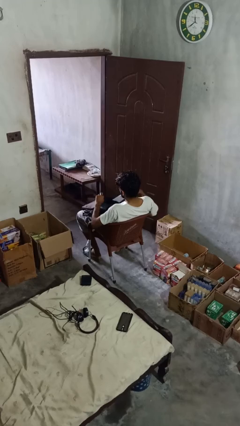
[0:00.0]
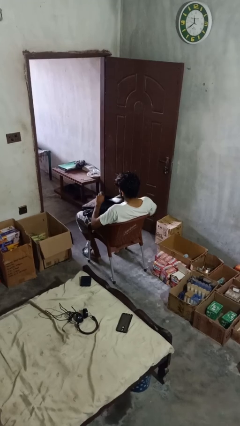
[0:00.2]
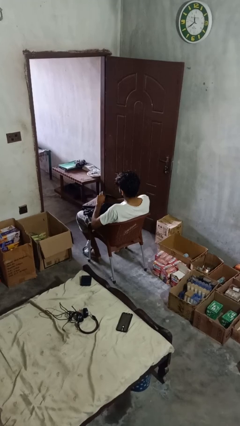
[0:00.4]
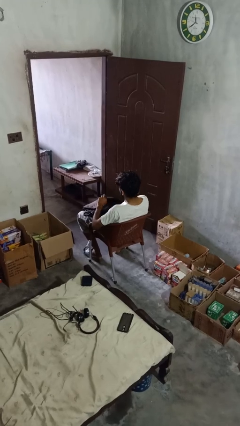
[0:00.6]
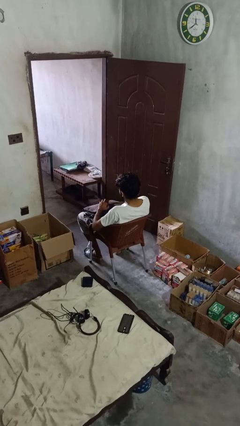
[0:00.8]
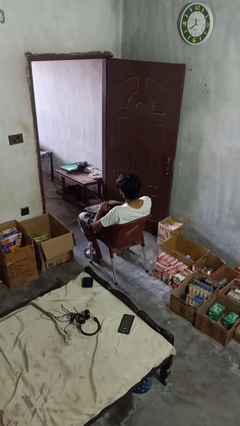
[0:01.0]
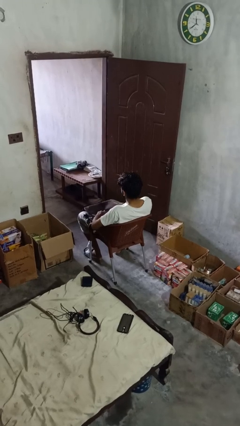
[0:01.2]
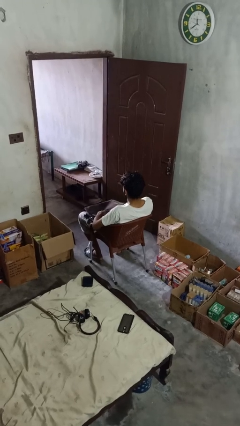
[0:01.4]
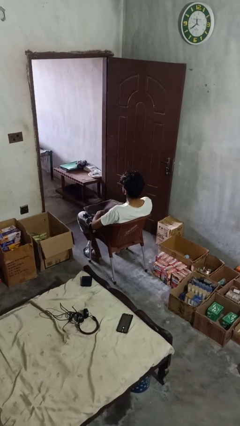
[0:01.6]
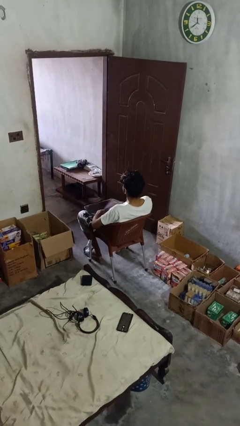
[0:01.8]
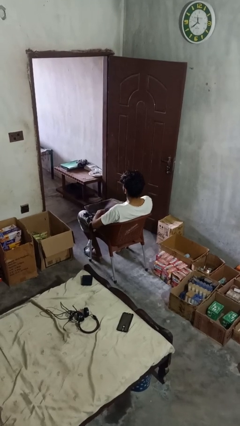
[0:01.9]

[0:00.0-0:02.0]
person puts object into backpack

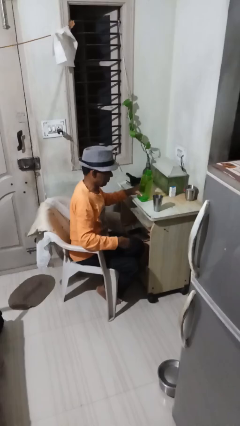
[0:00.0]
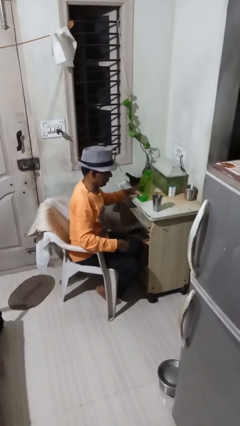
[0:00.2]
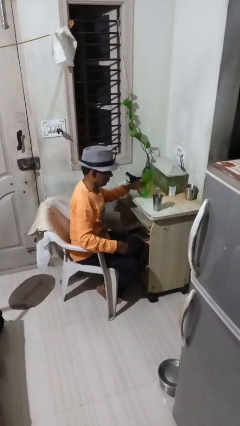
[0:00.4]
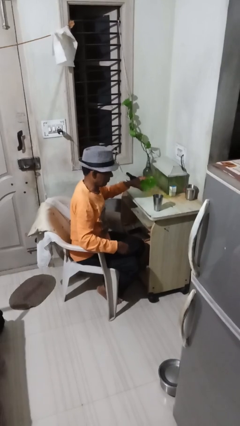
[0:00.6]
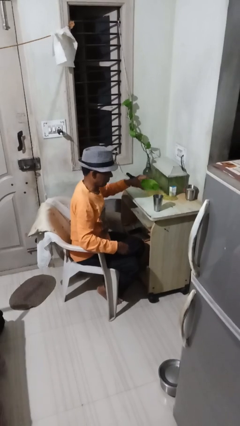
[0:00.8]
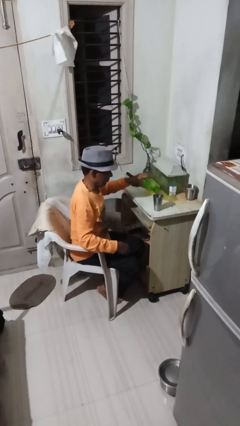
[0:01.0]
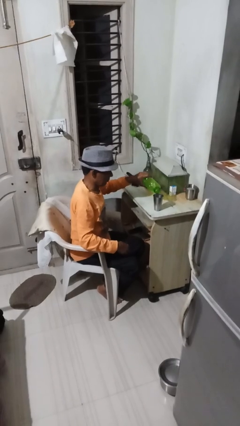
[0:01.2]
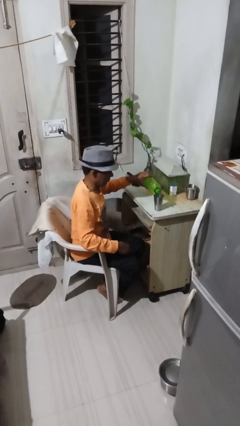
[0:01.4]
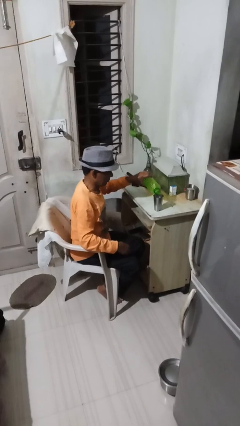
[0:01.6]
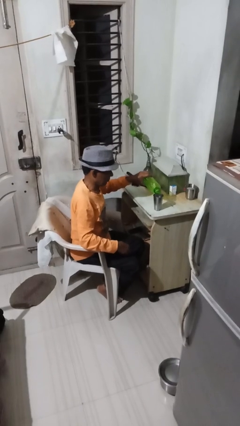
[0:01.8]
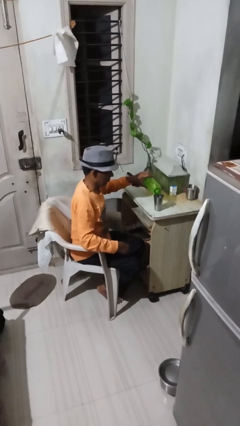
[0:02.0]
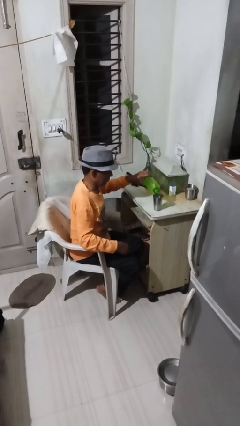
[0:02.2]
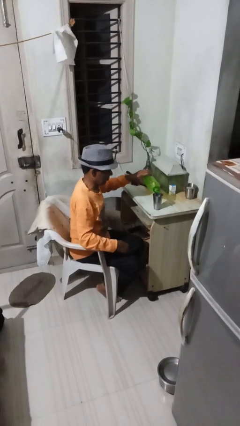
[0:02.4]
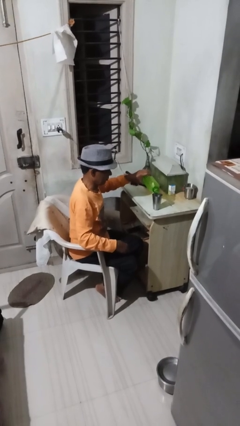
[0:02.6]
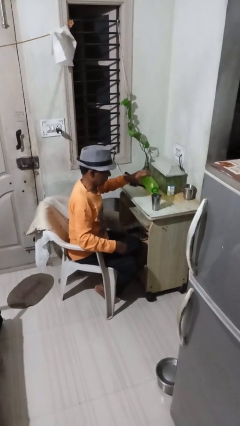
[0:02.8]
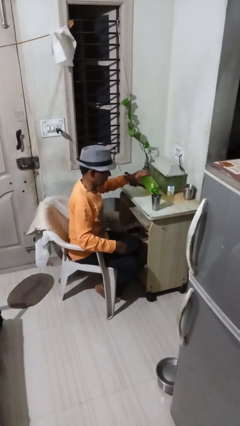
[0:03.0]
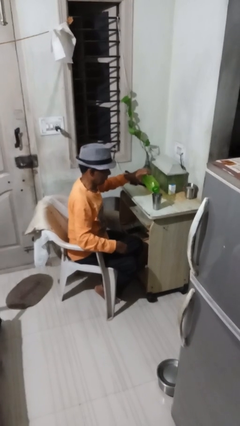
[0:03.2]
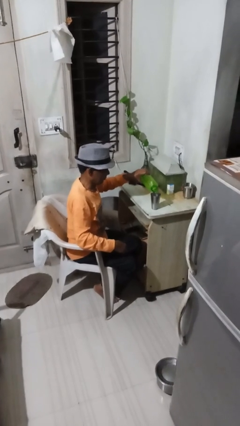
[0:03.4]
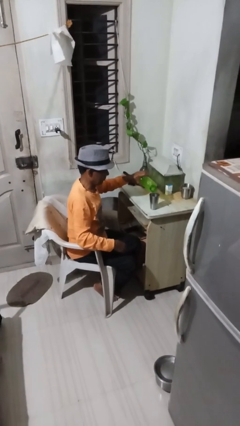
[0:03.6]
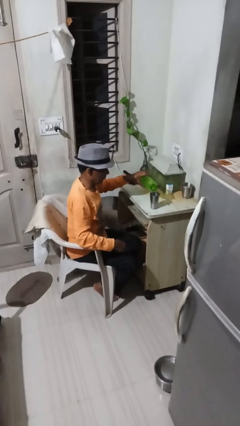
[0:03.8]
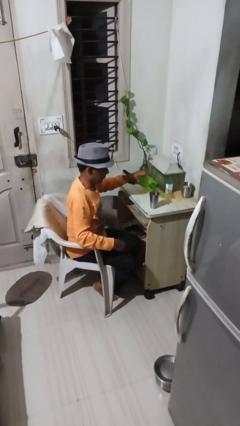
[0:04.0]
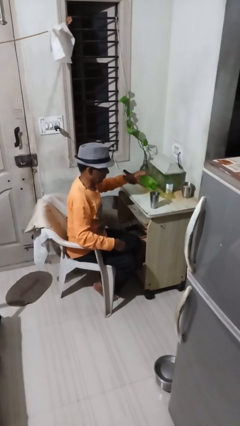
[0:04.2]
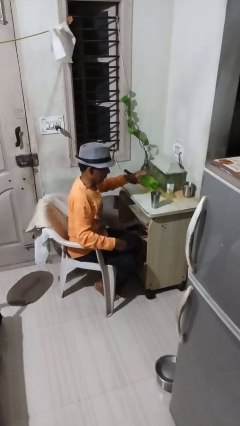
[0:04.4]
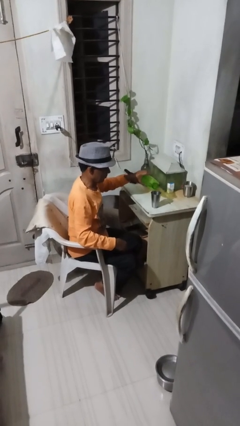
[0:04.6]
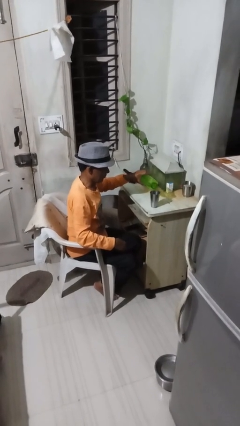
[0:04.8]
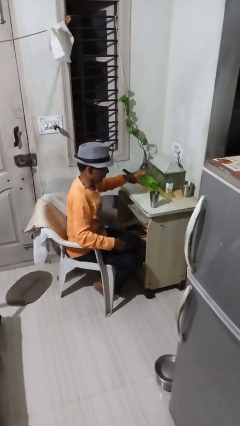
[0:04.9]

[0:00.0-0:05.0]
person pours liquid into cup

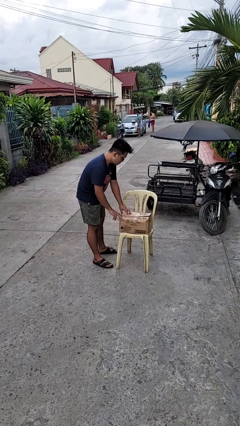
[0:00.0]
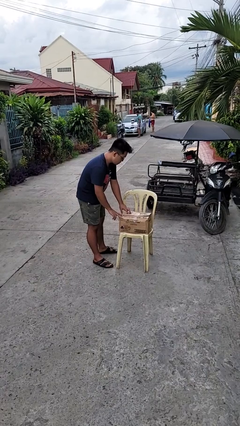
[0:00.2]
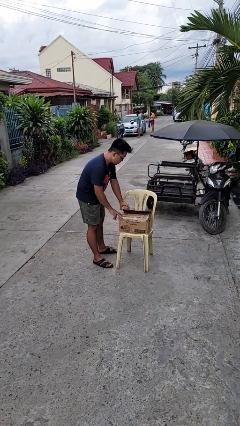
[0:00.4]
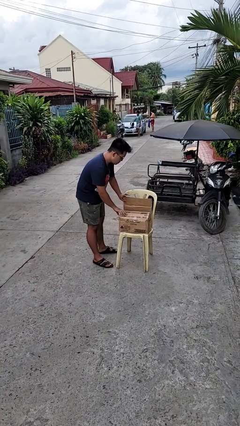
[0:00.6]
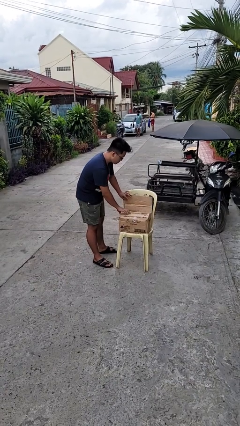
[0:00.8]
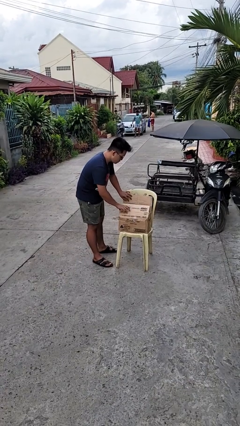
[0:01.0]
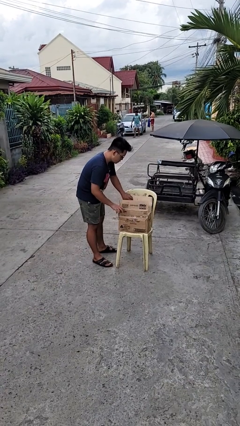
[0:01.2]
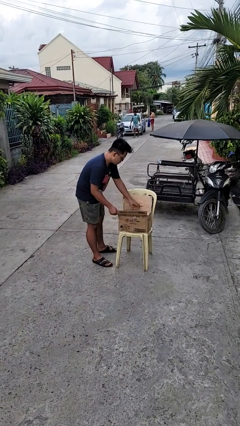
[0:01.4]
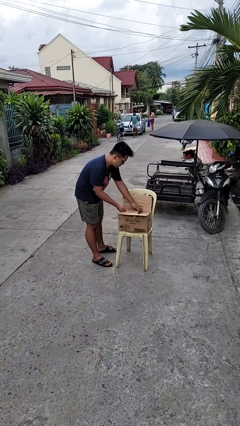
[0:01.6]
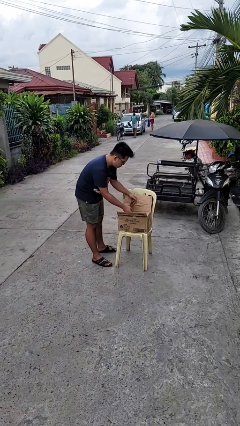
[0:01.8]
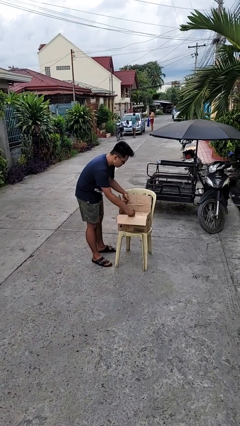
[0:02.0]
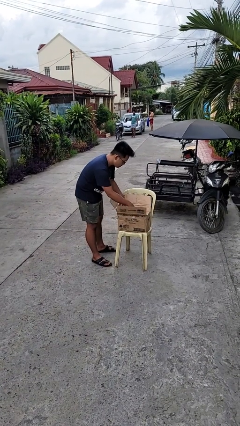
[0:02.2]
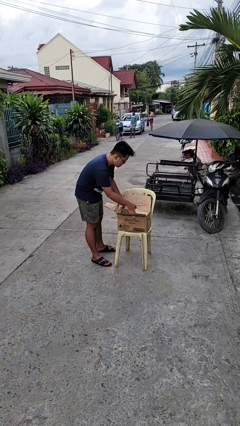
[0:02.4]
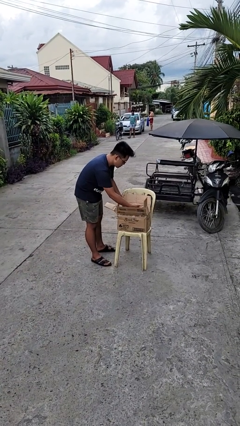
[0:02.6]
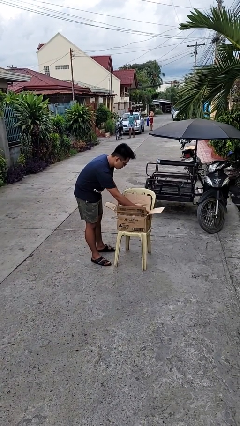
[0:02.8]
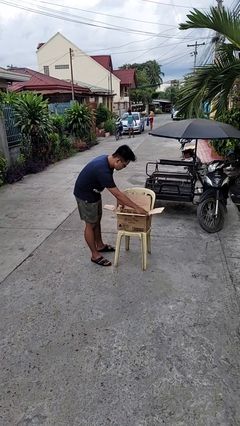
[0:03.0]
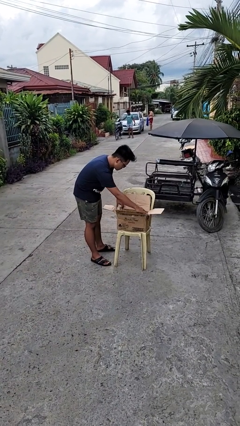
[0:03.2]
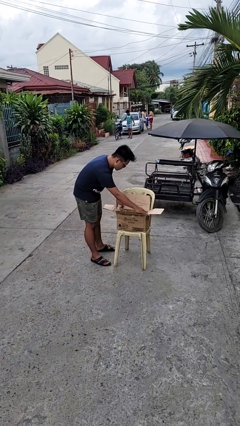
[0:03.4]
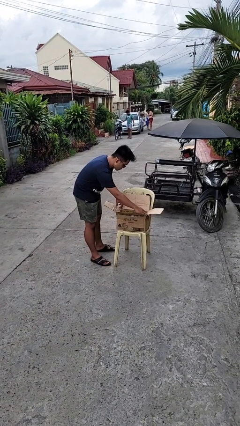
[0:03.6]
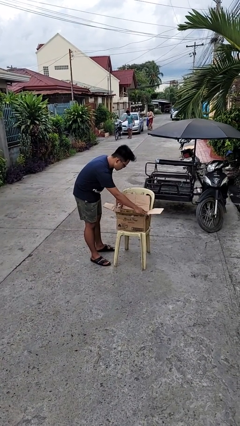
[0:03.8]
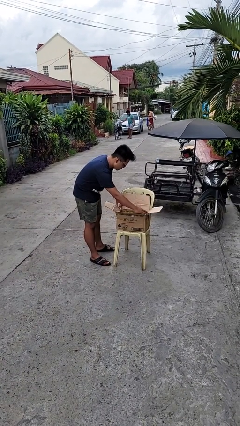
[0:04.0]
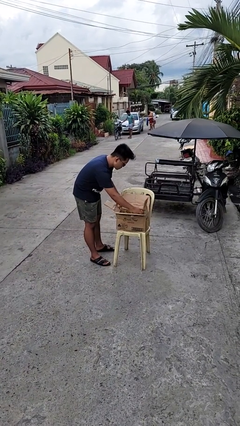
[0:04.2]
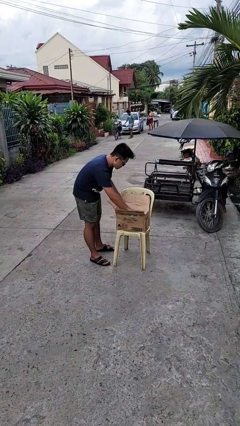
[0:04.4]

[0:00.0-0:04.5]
person opens box

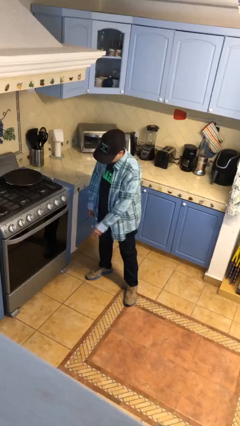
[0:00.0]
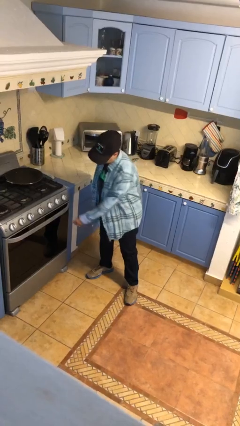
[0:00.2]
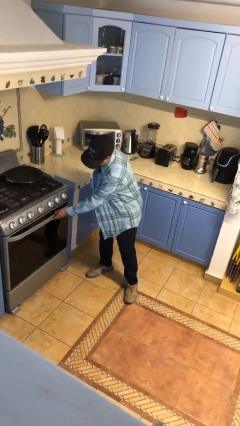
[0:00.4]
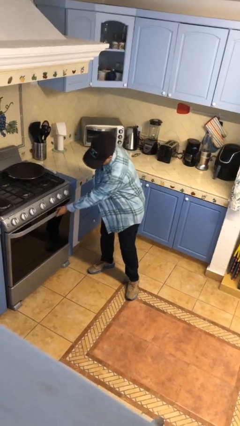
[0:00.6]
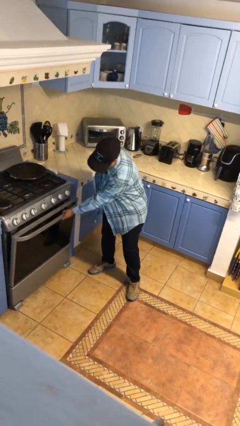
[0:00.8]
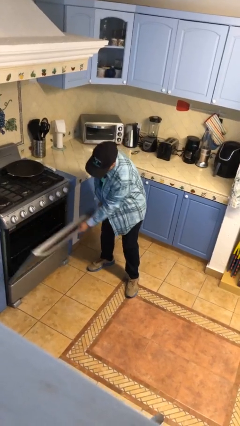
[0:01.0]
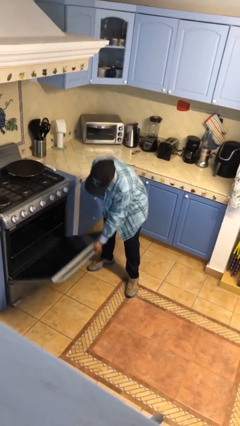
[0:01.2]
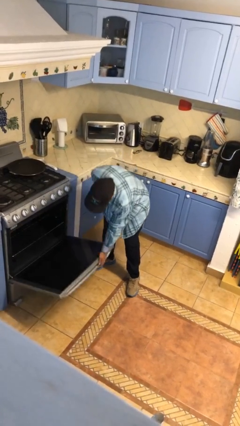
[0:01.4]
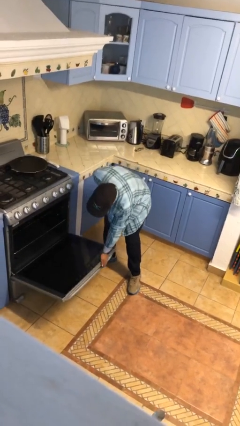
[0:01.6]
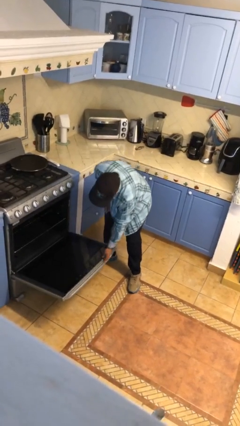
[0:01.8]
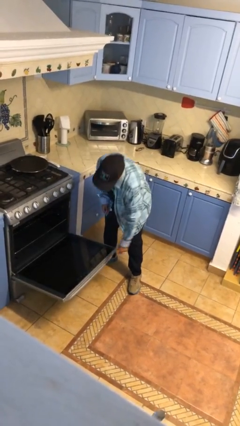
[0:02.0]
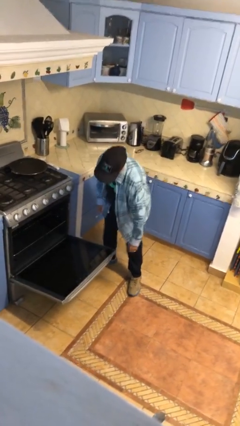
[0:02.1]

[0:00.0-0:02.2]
person opens oven door

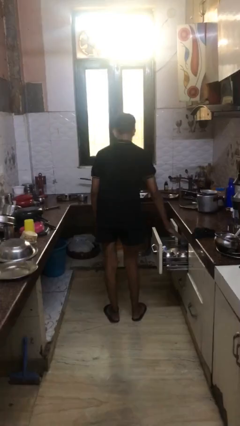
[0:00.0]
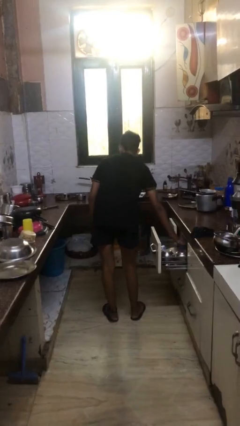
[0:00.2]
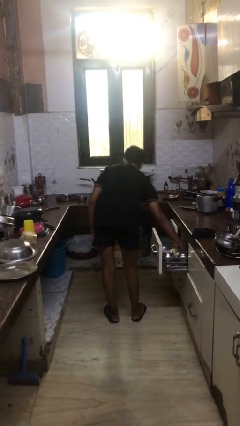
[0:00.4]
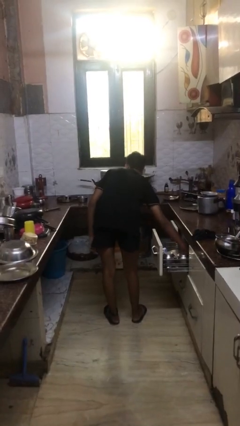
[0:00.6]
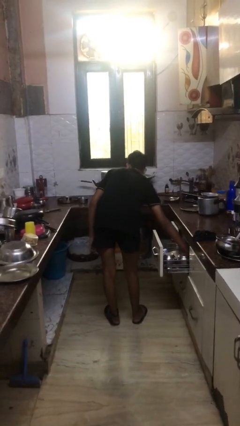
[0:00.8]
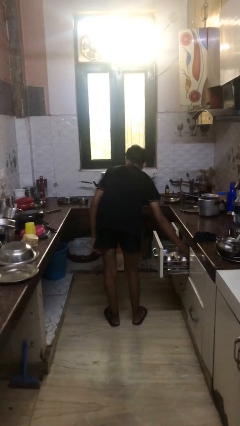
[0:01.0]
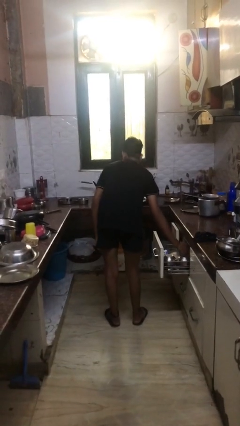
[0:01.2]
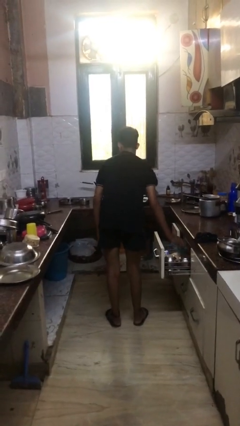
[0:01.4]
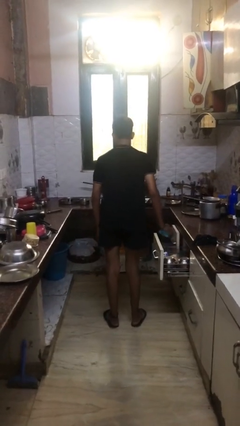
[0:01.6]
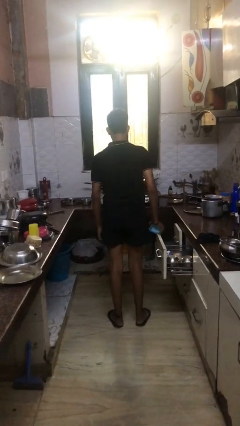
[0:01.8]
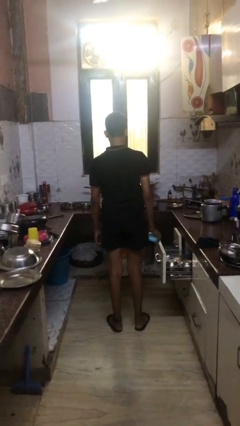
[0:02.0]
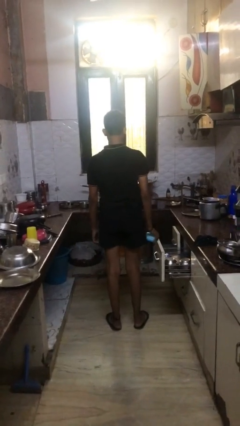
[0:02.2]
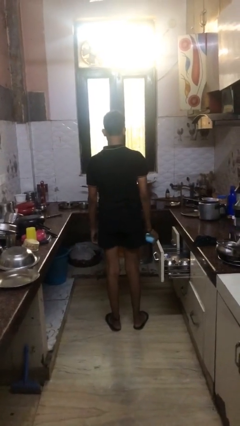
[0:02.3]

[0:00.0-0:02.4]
person takes object from kitchen drawer

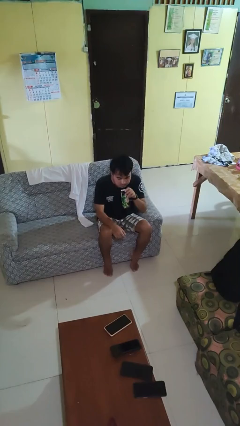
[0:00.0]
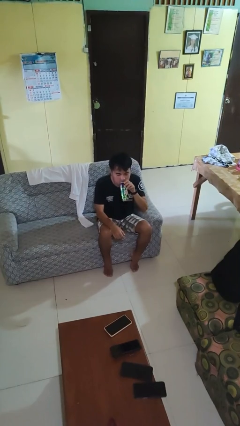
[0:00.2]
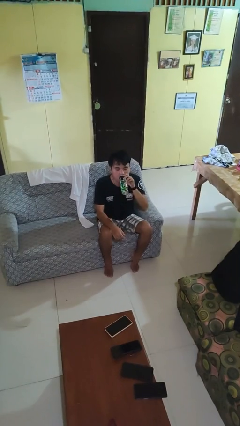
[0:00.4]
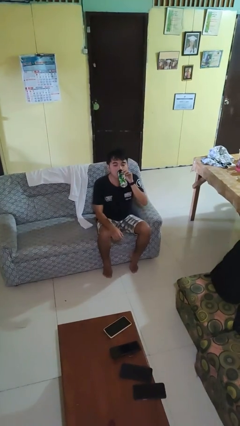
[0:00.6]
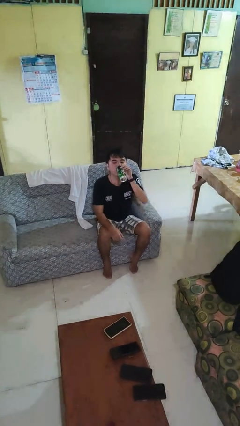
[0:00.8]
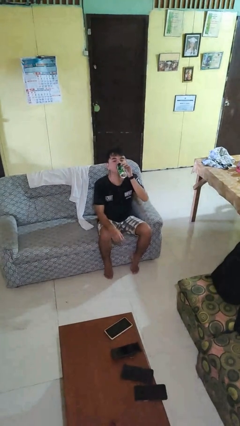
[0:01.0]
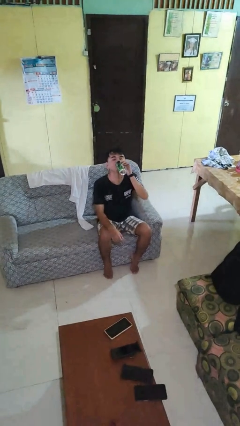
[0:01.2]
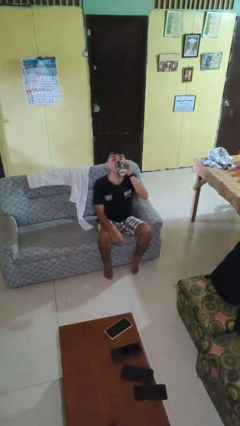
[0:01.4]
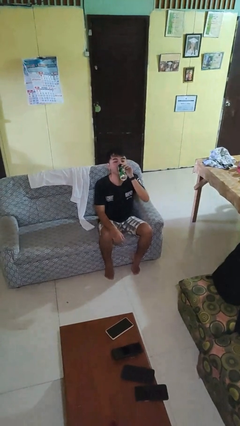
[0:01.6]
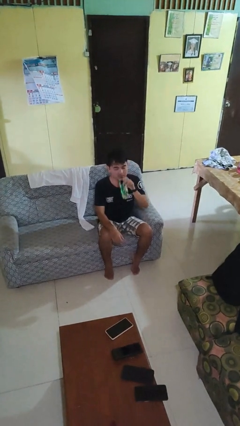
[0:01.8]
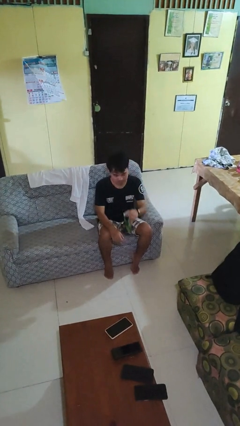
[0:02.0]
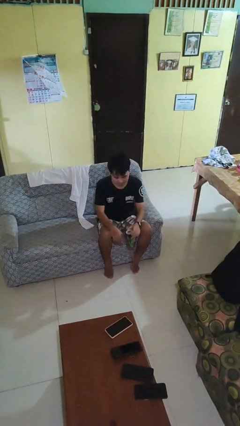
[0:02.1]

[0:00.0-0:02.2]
person drinks from beverage can
